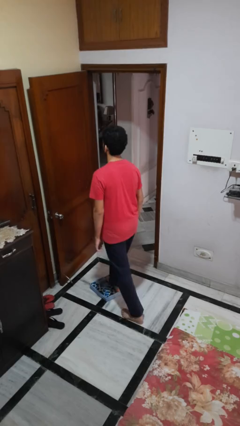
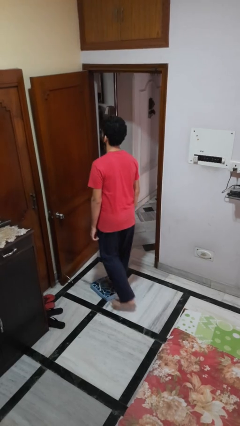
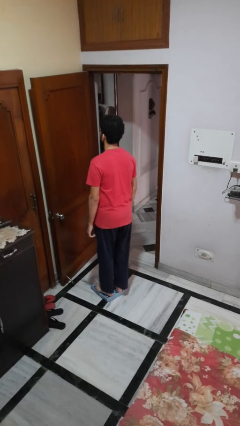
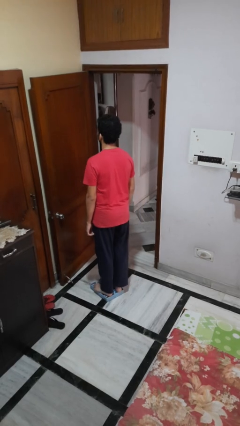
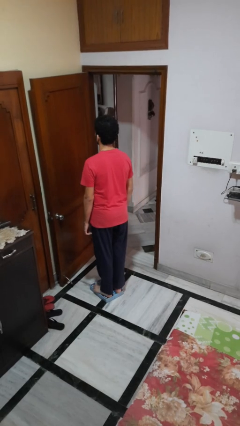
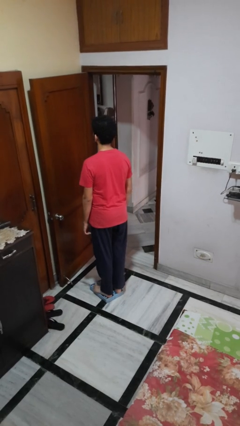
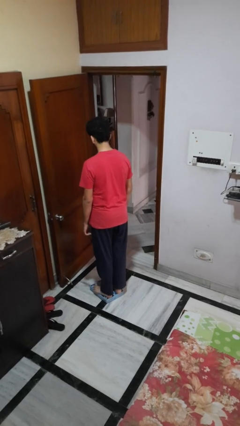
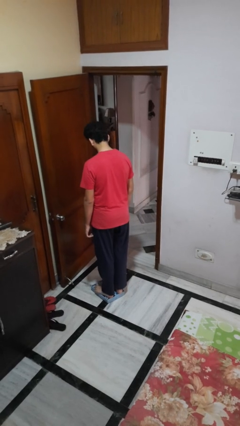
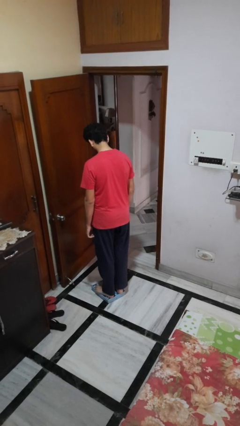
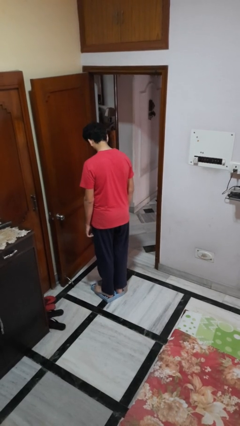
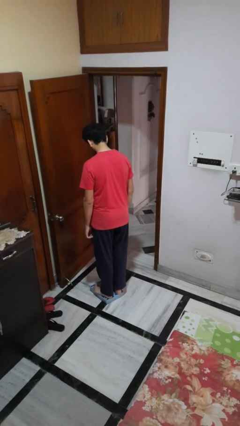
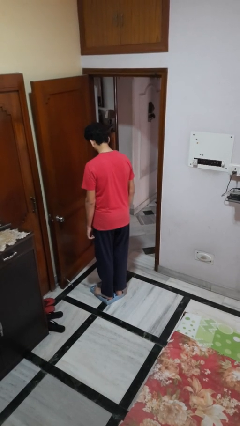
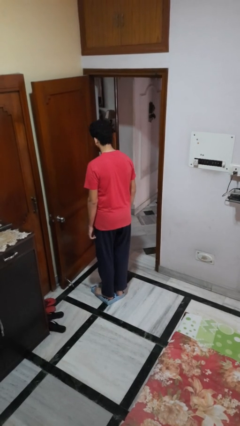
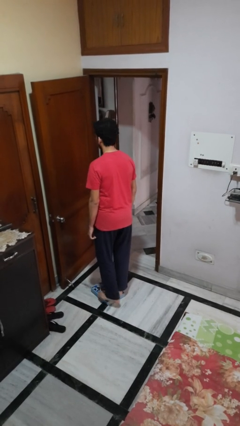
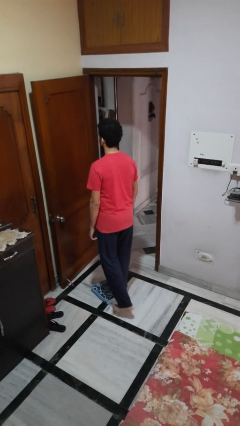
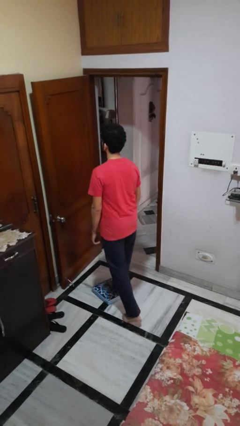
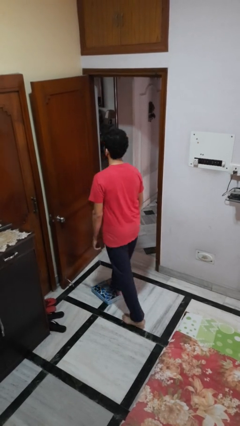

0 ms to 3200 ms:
person uses bodyweight scale

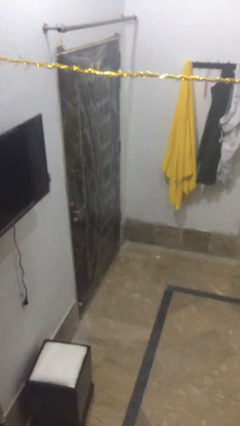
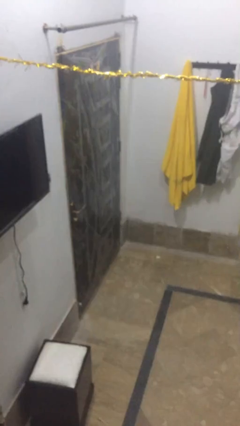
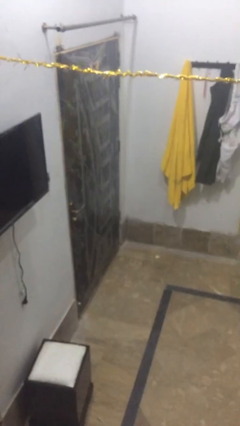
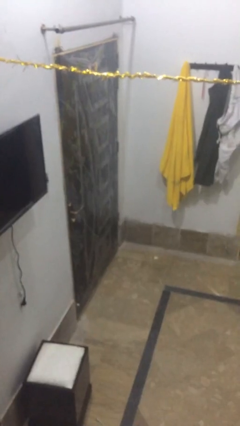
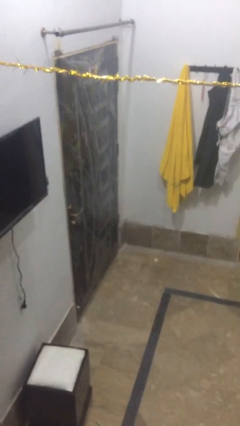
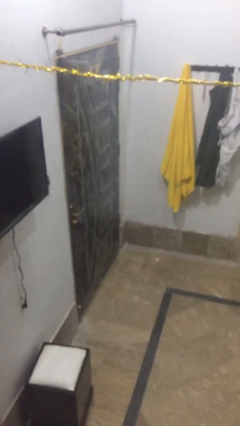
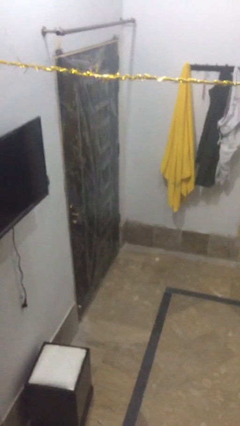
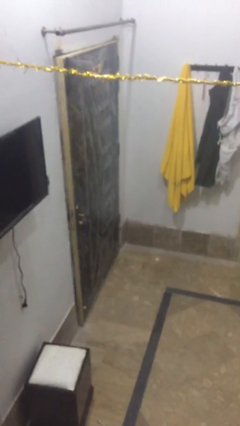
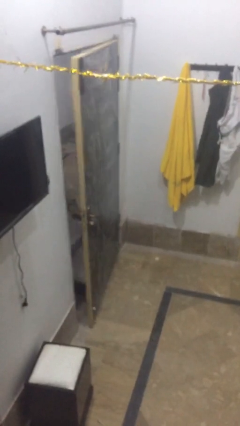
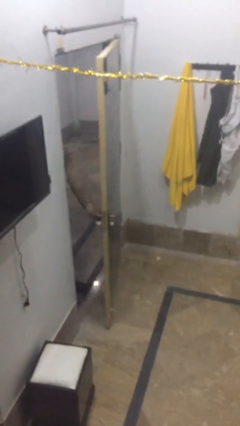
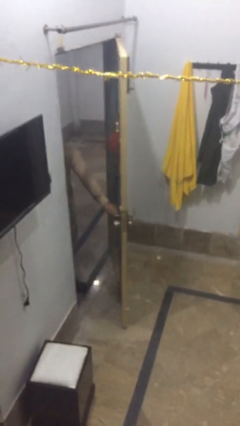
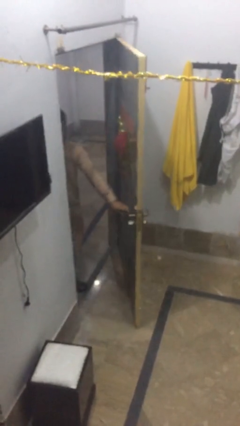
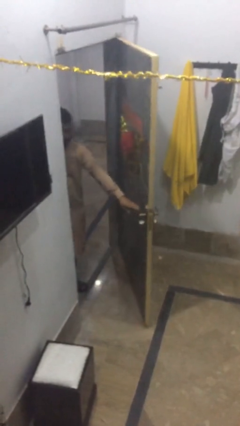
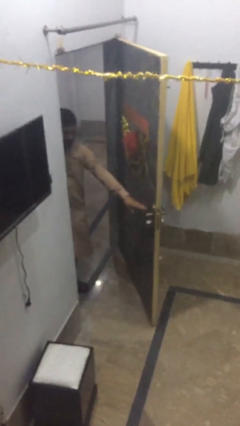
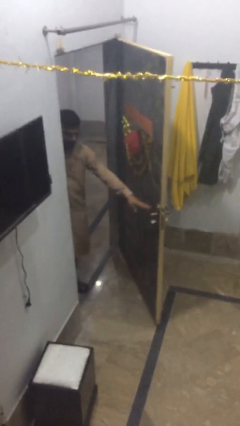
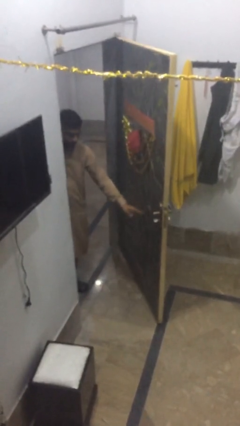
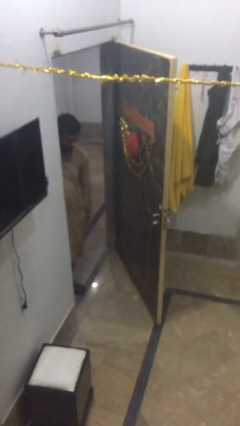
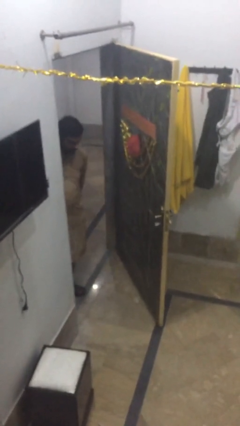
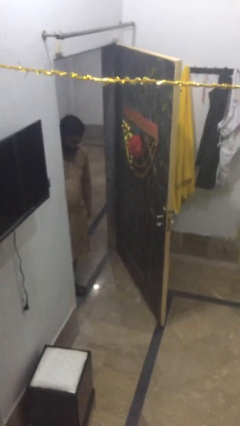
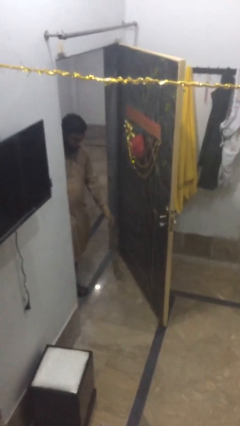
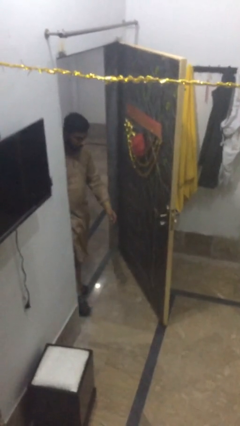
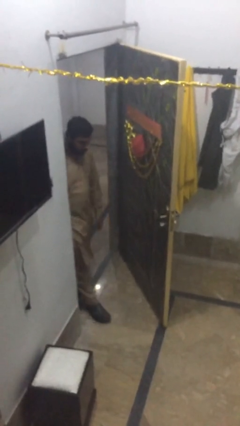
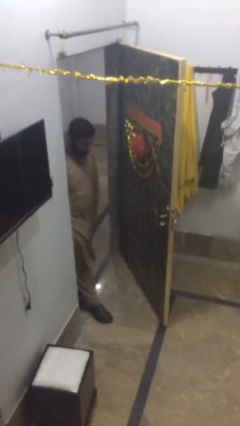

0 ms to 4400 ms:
person opens facility door

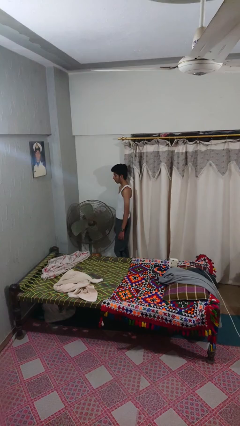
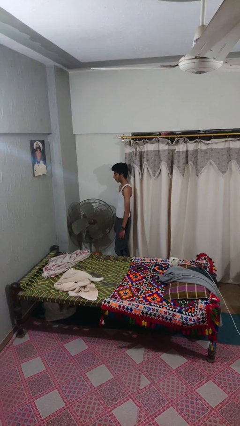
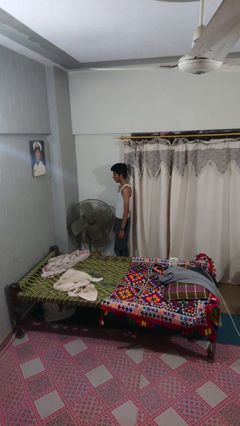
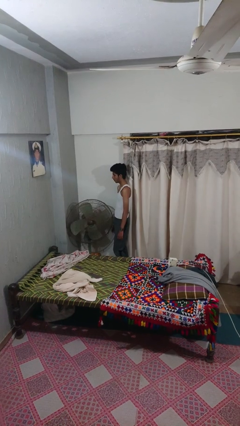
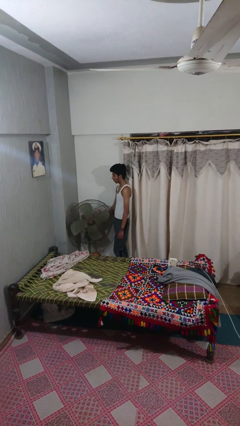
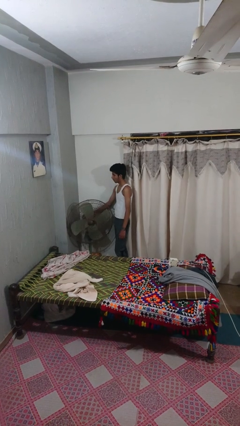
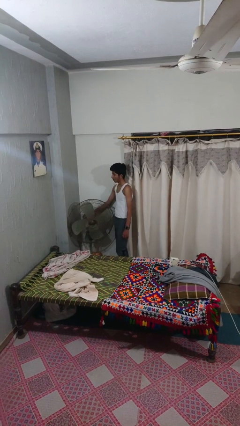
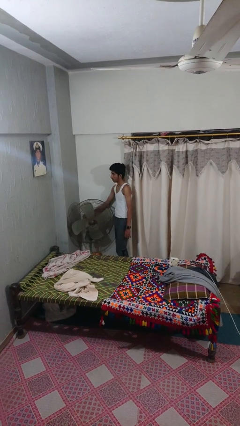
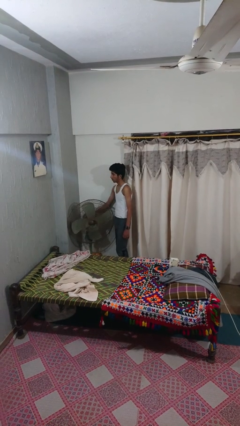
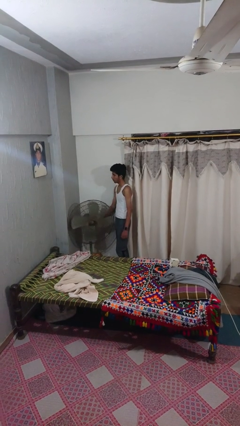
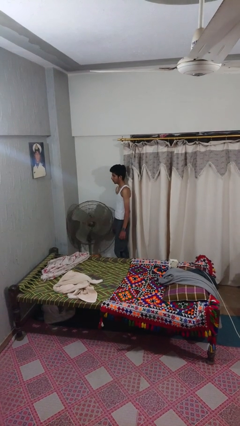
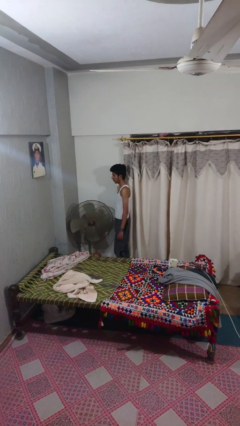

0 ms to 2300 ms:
person turns on fan

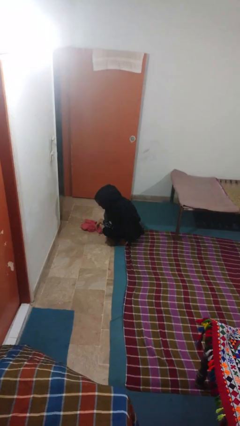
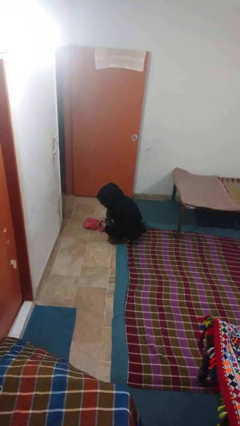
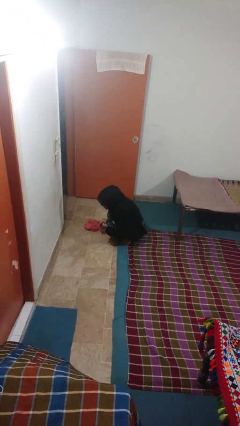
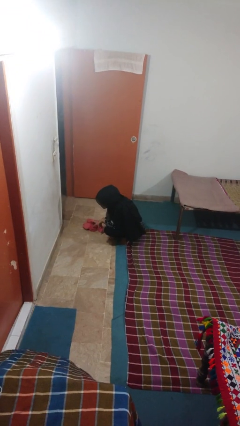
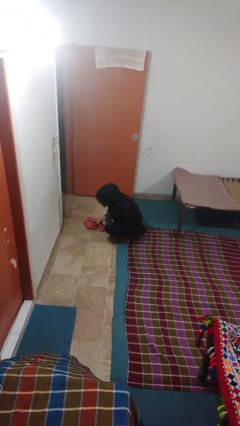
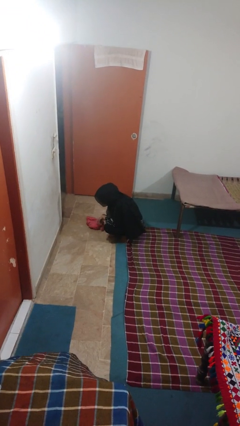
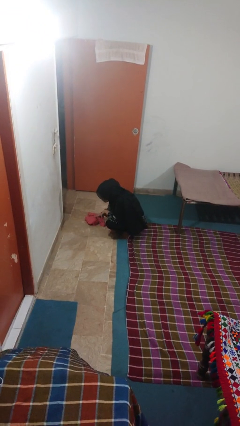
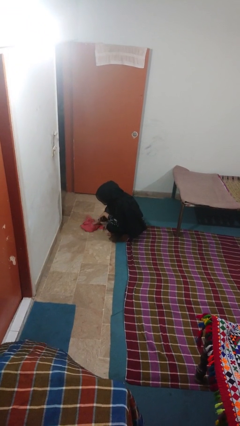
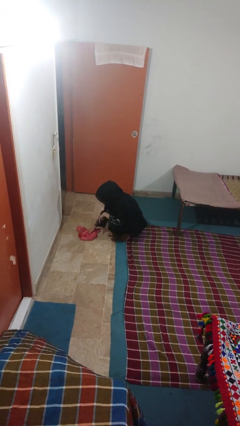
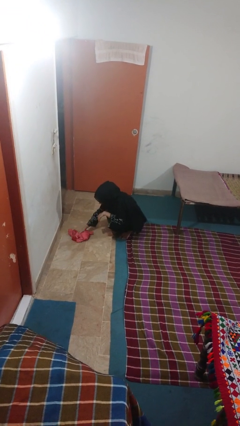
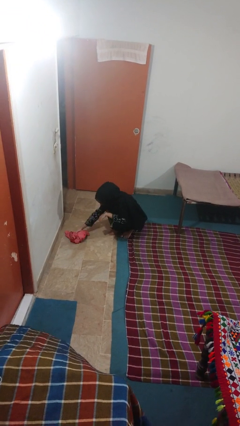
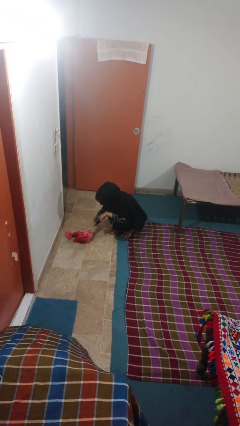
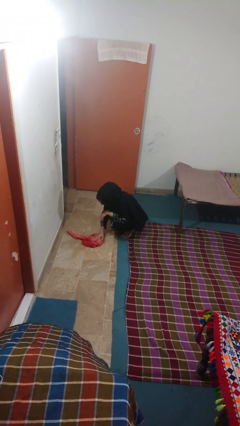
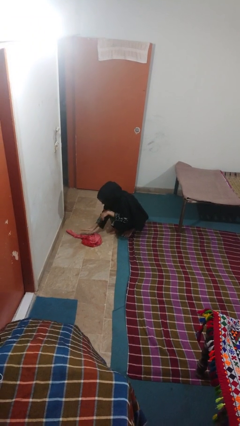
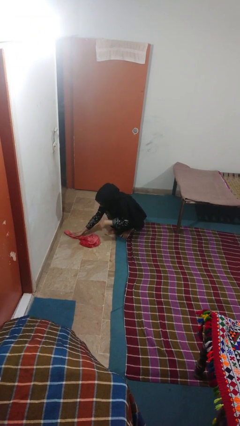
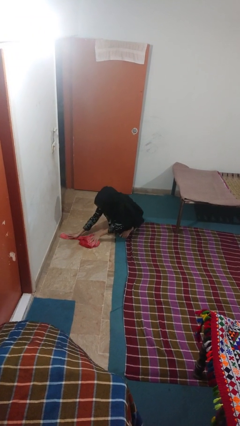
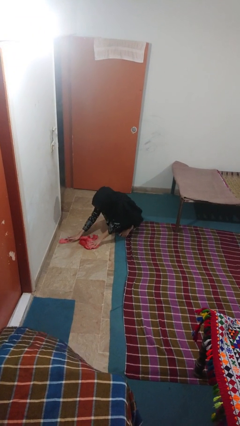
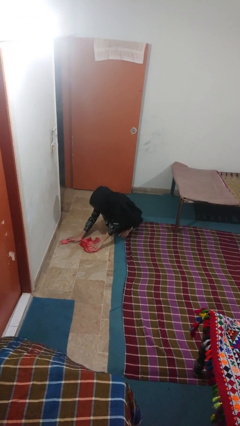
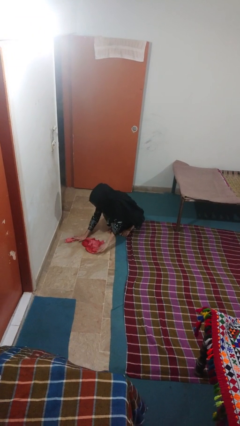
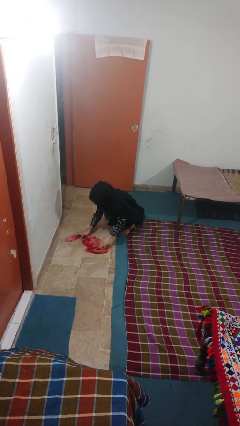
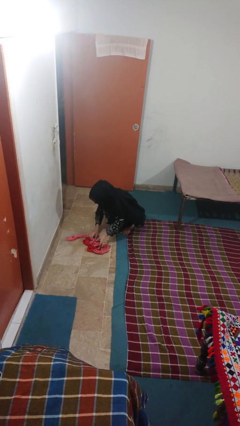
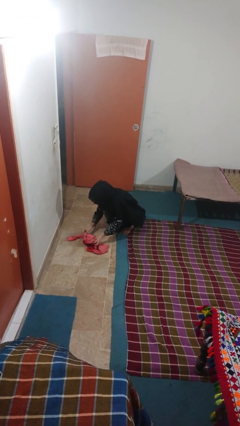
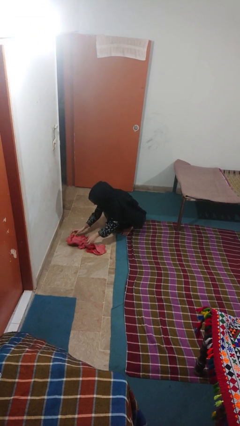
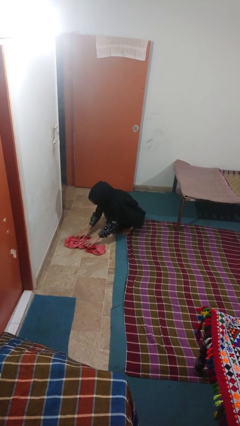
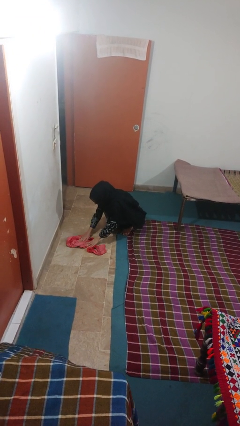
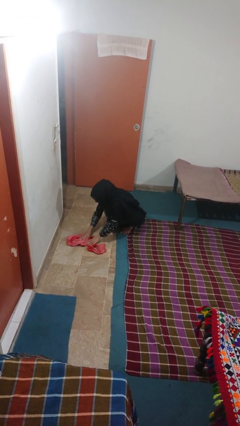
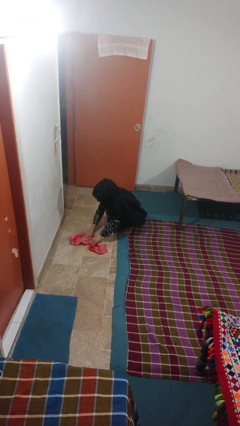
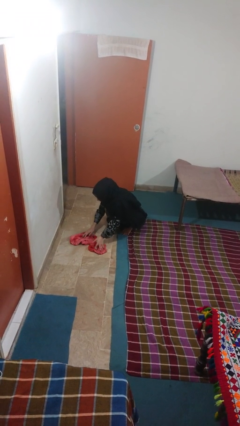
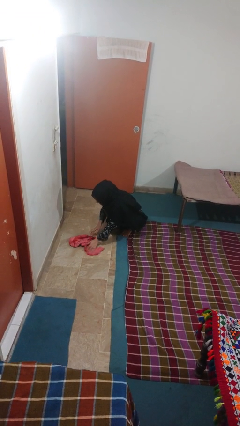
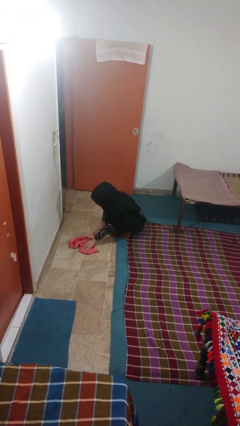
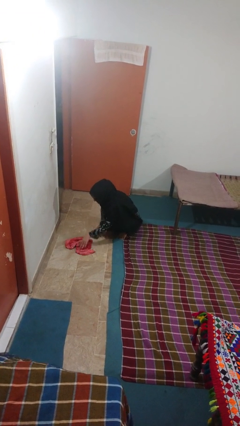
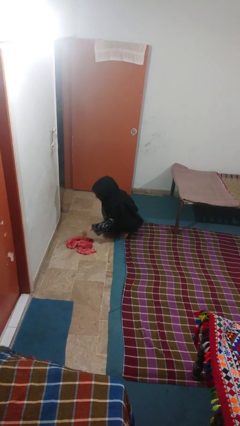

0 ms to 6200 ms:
person mops

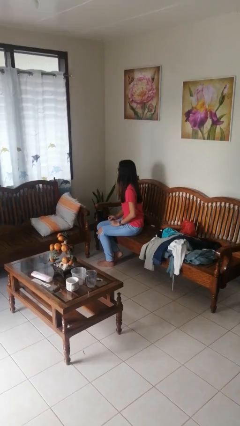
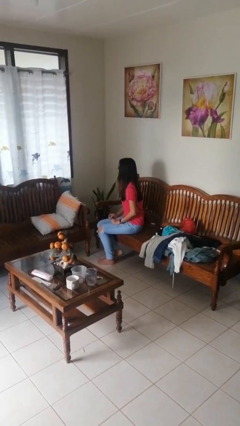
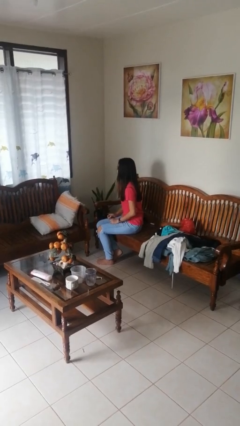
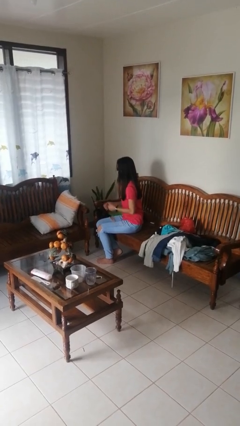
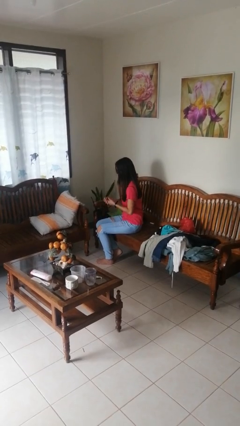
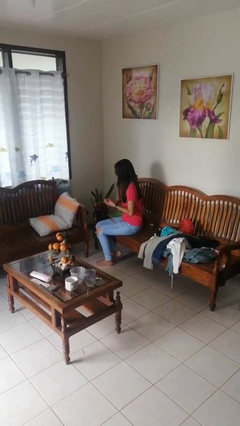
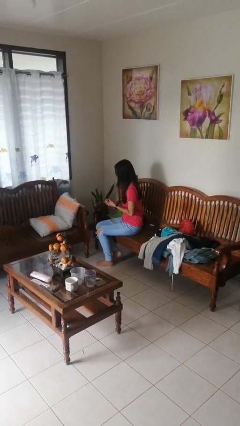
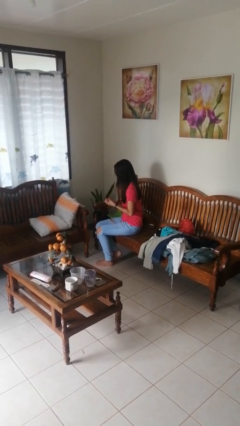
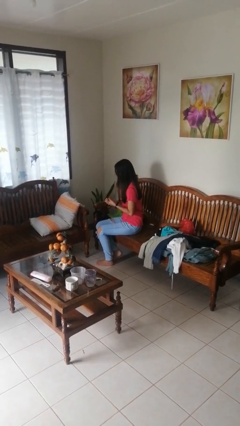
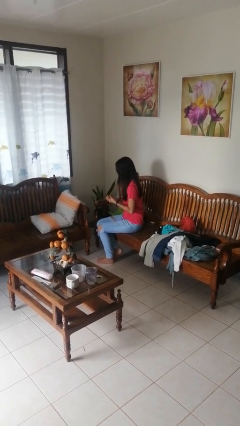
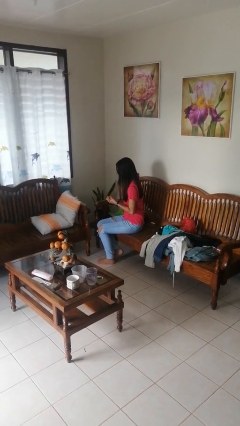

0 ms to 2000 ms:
person files fingernails
